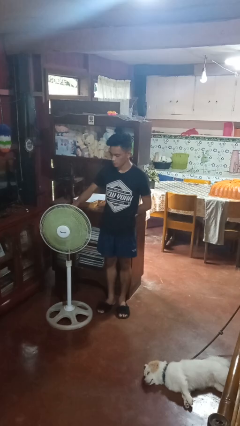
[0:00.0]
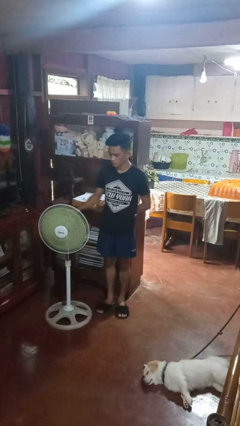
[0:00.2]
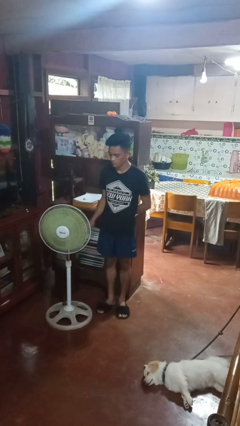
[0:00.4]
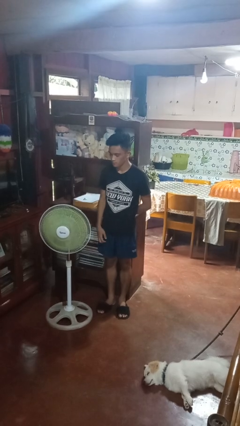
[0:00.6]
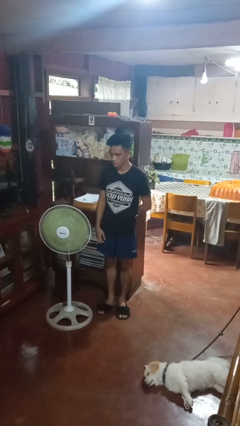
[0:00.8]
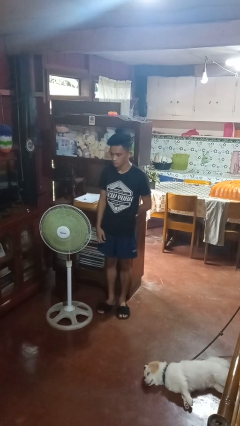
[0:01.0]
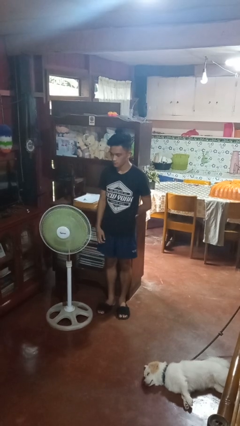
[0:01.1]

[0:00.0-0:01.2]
person turns off fan

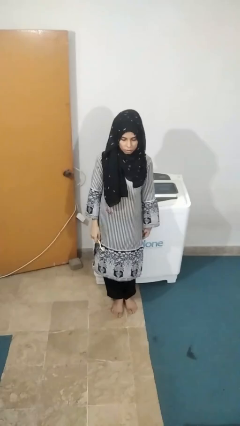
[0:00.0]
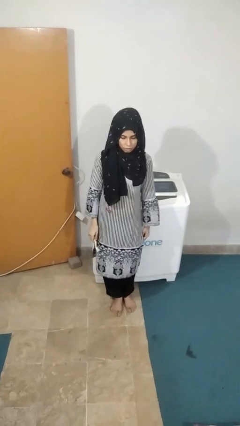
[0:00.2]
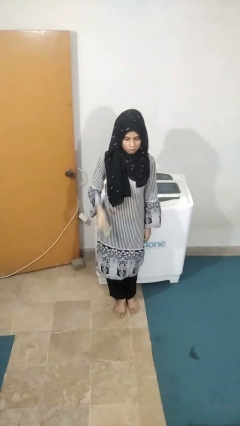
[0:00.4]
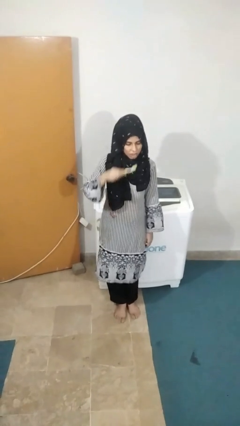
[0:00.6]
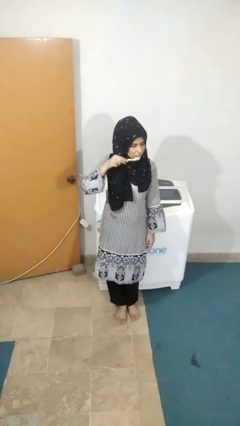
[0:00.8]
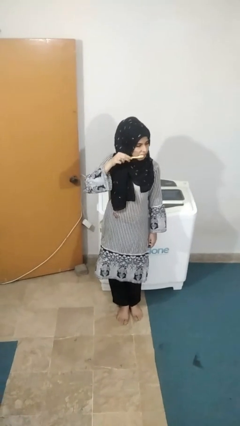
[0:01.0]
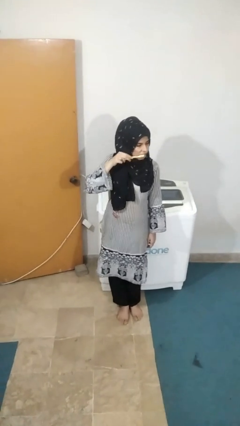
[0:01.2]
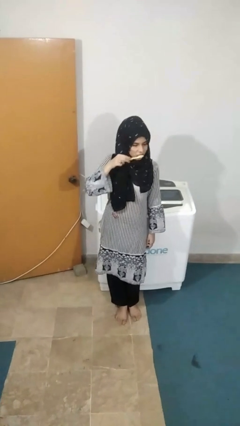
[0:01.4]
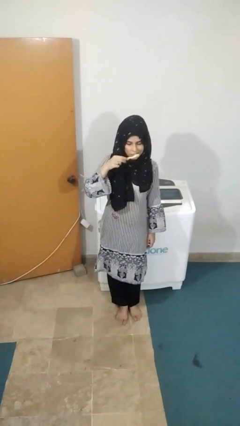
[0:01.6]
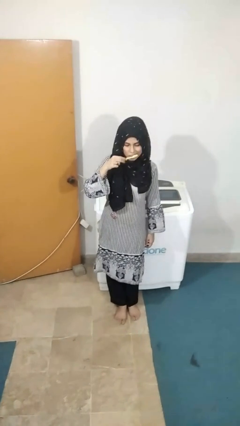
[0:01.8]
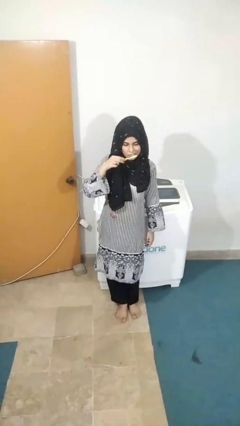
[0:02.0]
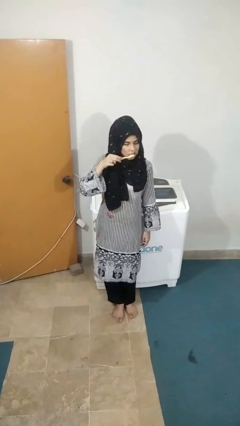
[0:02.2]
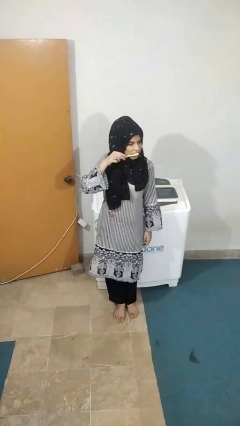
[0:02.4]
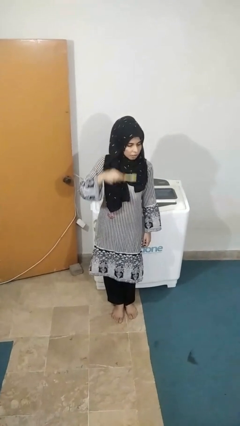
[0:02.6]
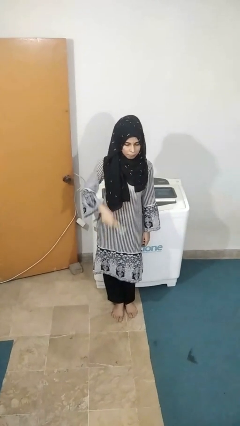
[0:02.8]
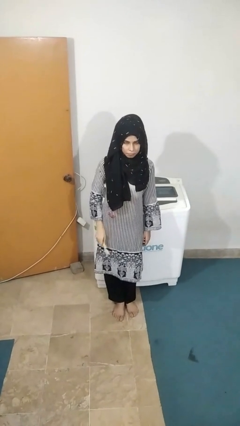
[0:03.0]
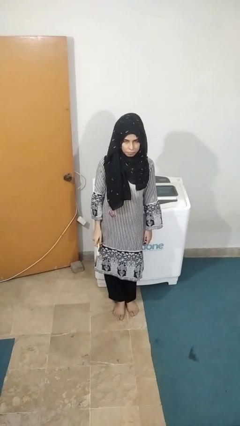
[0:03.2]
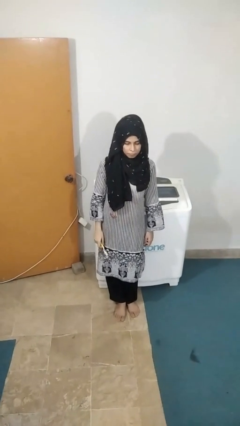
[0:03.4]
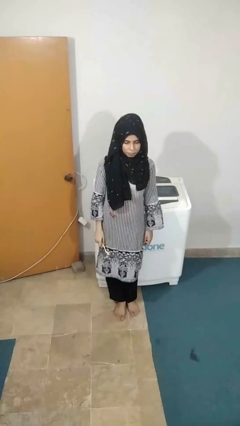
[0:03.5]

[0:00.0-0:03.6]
person brushes teeth

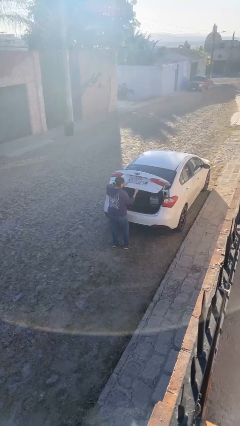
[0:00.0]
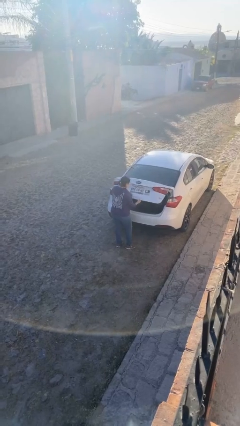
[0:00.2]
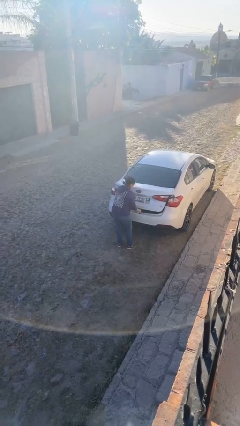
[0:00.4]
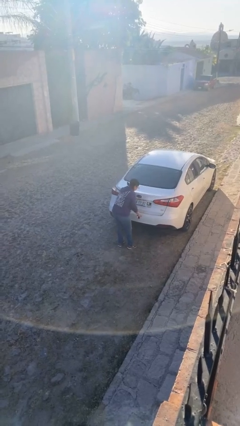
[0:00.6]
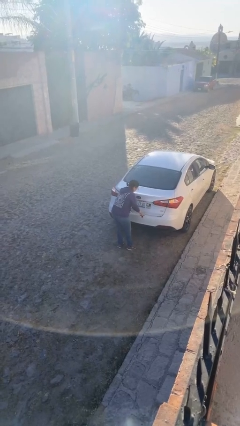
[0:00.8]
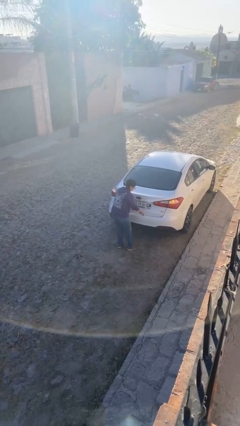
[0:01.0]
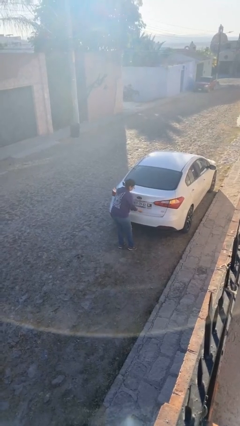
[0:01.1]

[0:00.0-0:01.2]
person closes car trunk

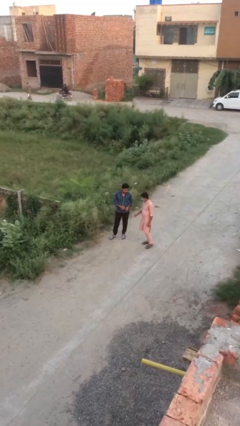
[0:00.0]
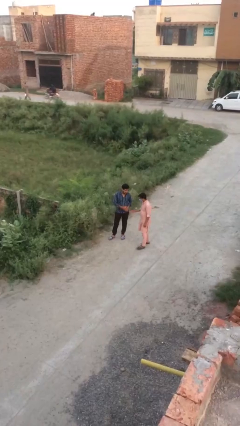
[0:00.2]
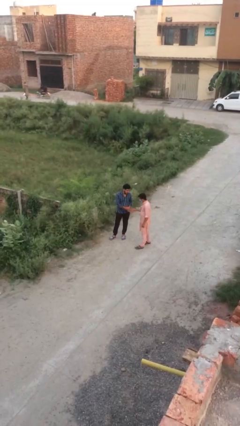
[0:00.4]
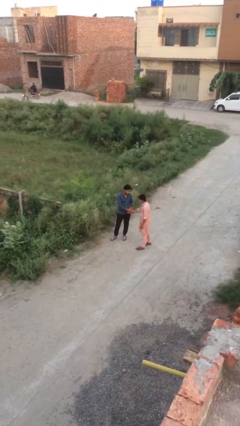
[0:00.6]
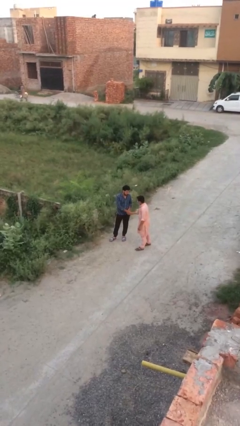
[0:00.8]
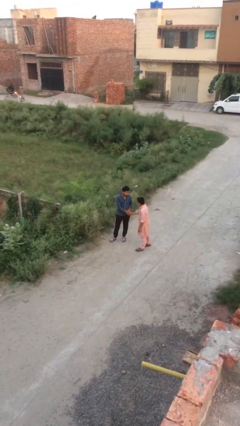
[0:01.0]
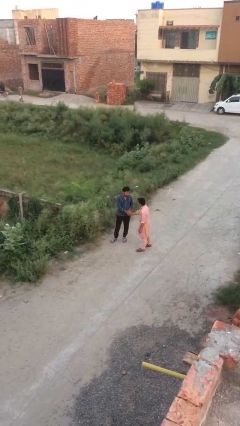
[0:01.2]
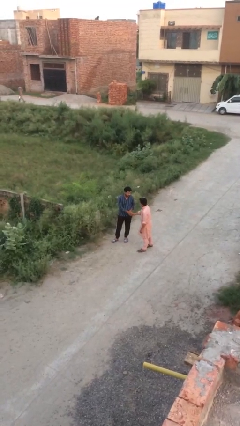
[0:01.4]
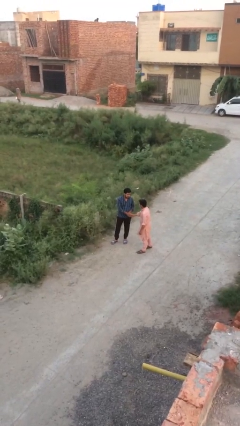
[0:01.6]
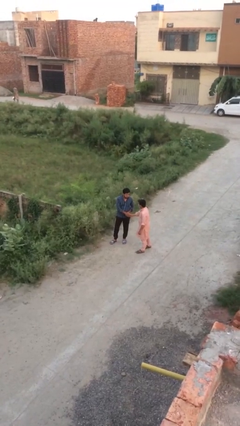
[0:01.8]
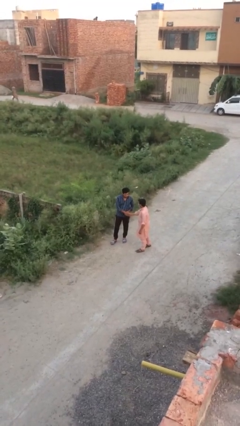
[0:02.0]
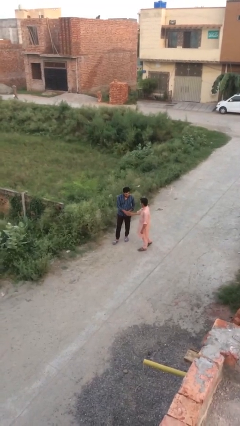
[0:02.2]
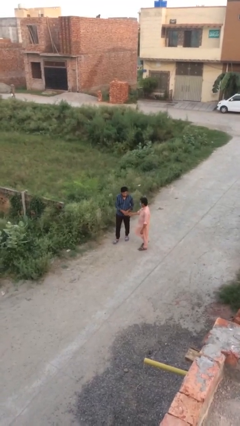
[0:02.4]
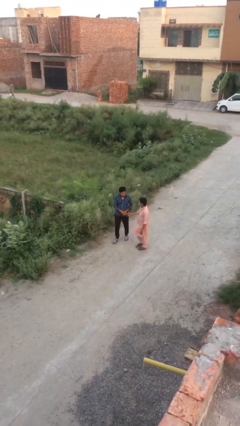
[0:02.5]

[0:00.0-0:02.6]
person shakes hand

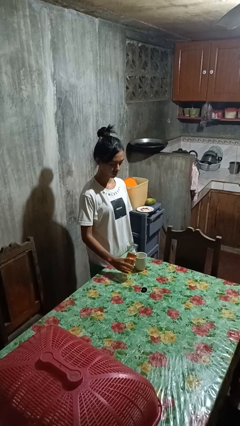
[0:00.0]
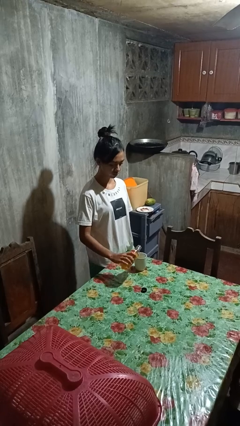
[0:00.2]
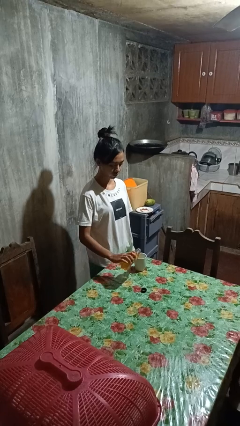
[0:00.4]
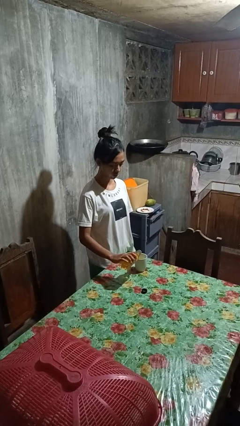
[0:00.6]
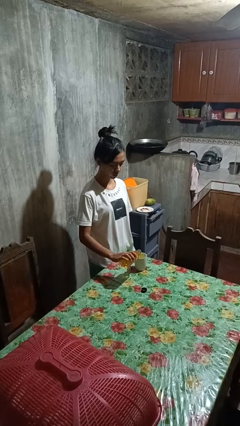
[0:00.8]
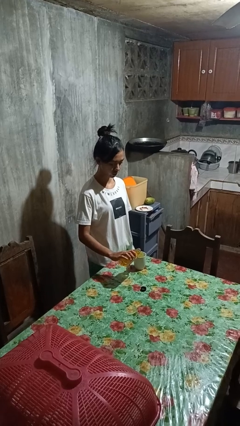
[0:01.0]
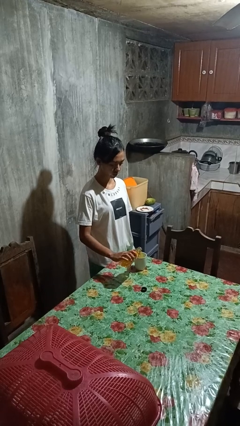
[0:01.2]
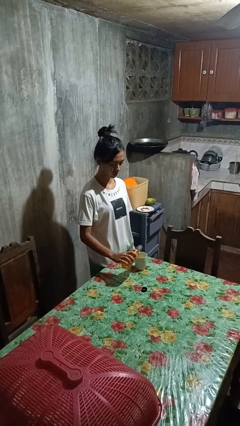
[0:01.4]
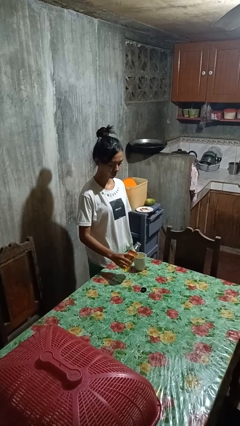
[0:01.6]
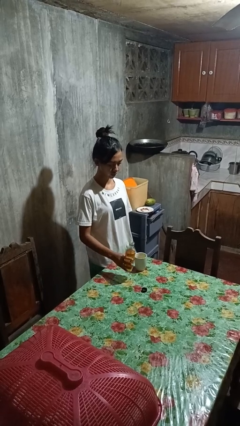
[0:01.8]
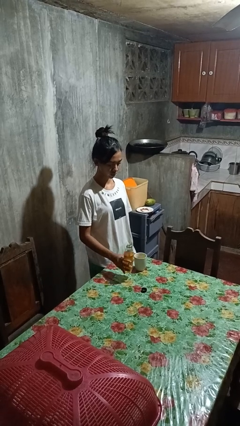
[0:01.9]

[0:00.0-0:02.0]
person pours liquid into cup

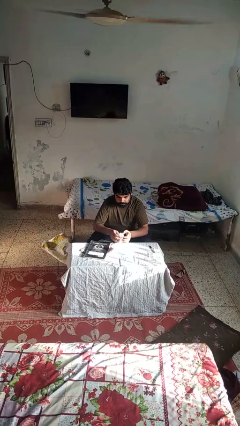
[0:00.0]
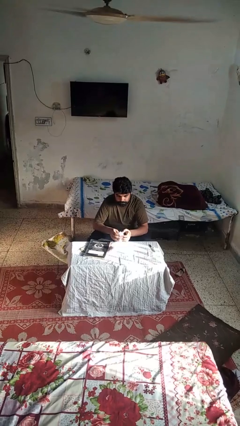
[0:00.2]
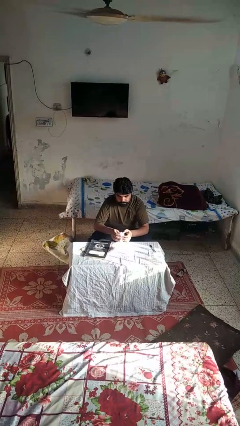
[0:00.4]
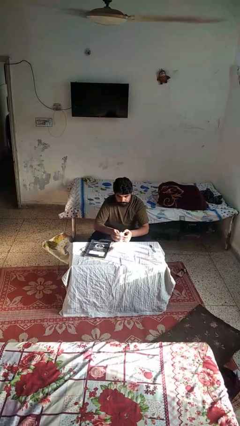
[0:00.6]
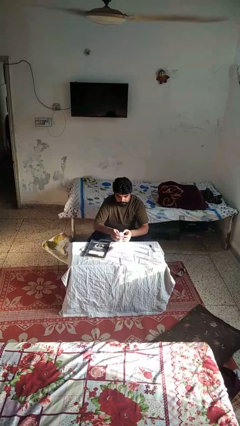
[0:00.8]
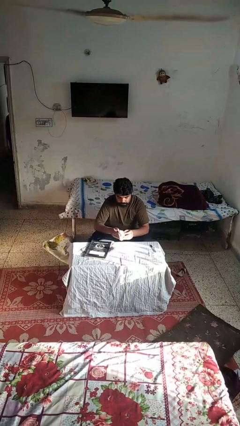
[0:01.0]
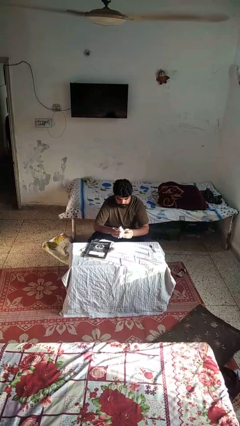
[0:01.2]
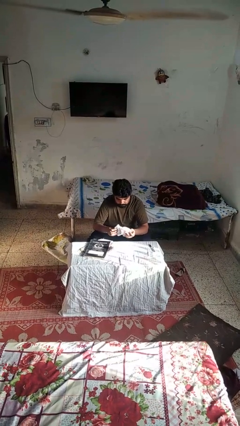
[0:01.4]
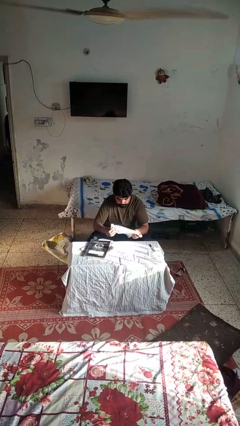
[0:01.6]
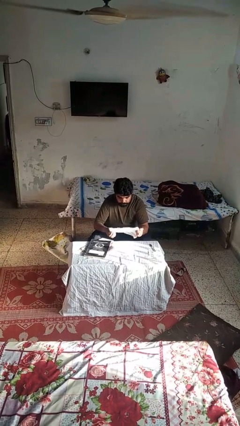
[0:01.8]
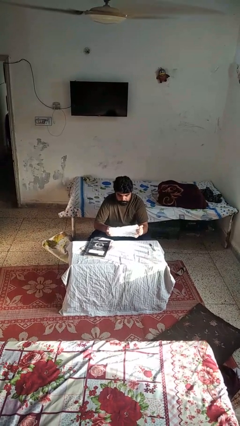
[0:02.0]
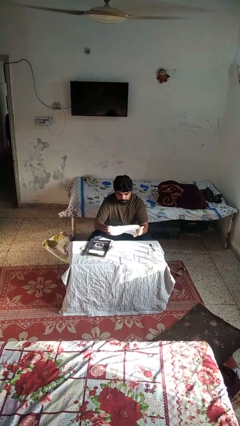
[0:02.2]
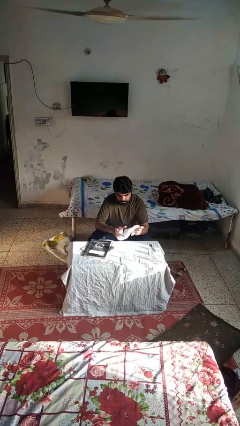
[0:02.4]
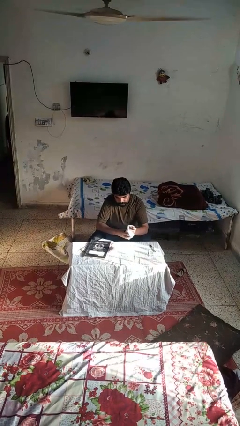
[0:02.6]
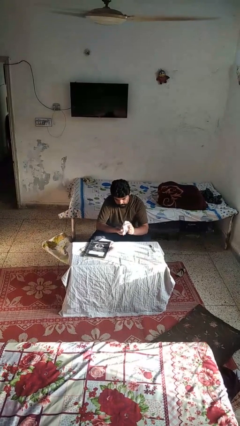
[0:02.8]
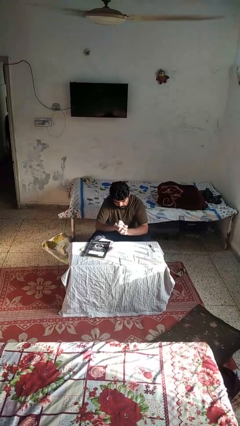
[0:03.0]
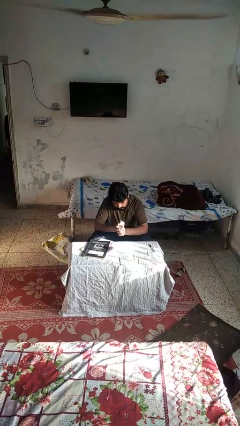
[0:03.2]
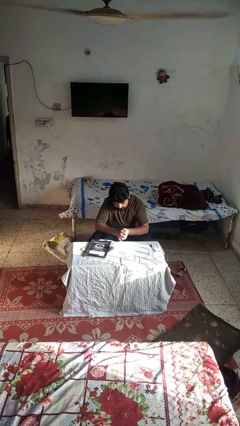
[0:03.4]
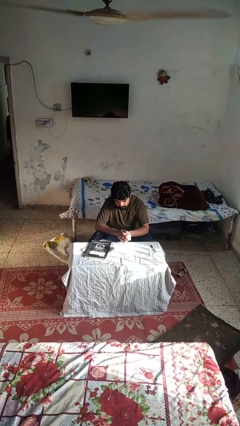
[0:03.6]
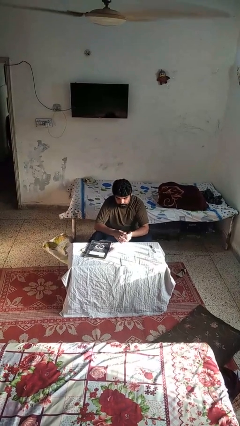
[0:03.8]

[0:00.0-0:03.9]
person crumples paper

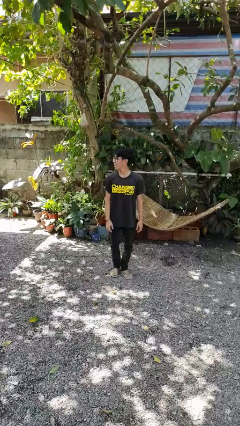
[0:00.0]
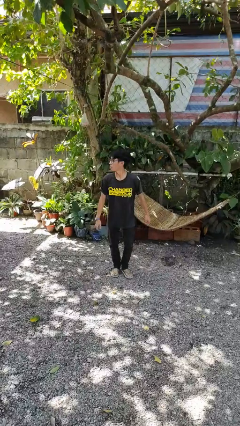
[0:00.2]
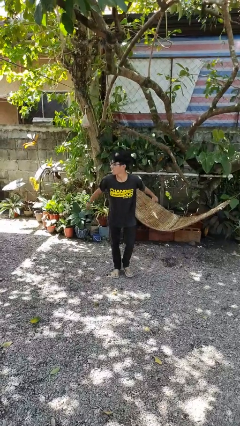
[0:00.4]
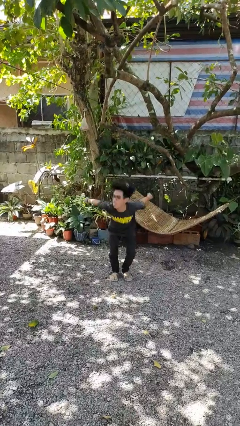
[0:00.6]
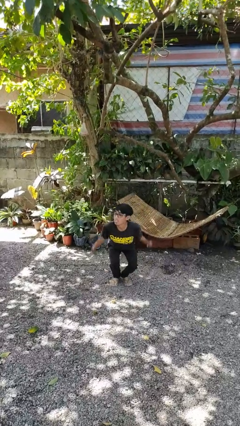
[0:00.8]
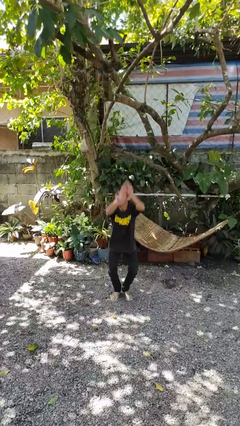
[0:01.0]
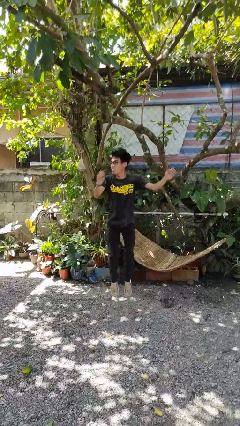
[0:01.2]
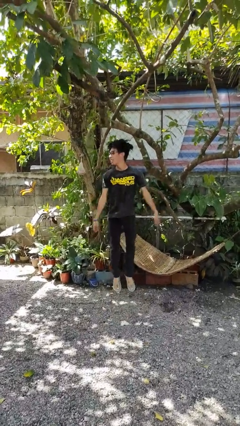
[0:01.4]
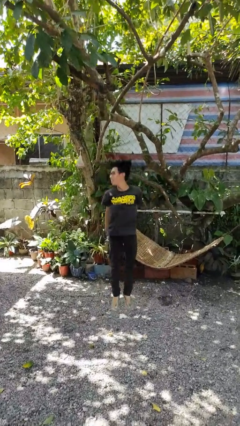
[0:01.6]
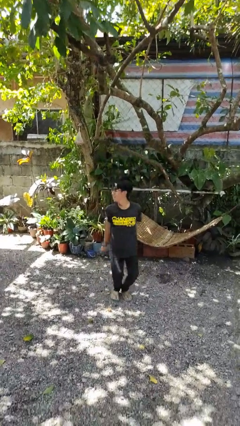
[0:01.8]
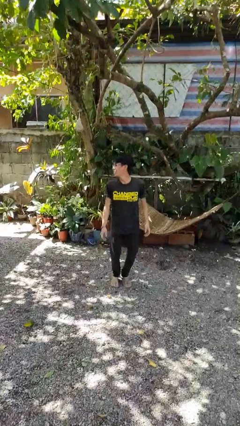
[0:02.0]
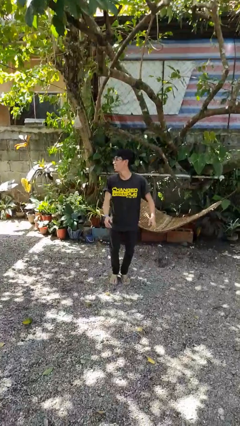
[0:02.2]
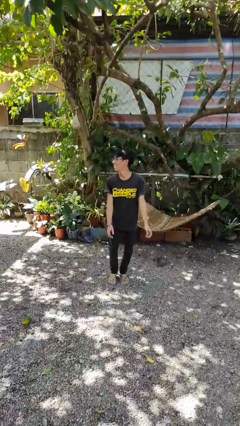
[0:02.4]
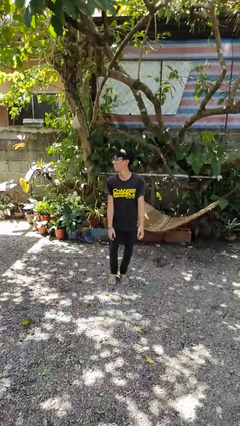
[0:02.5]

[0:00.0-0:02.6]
person jumps

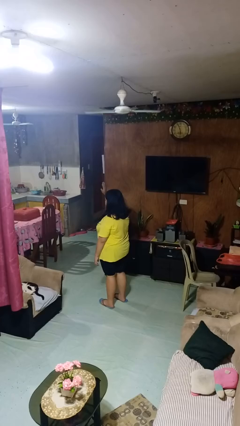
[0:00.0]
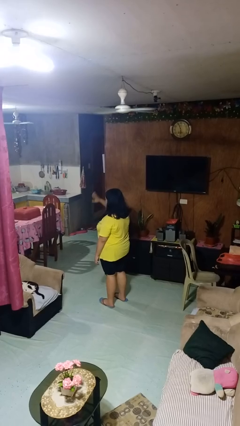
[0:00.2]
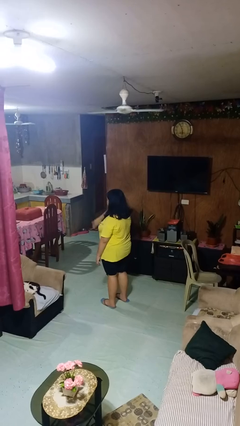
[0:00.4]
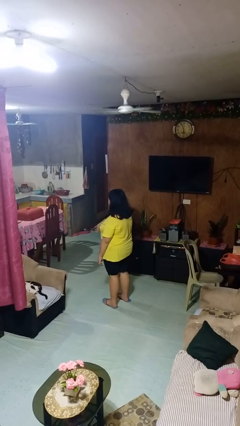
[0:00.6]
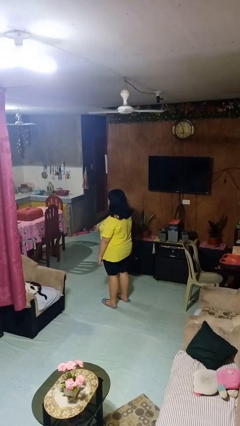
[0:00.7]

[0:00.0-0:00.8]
person gestures swipe down
